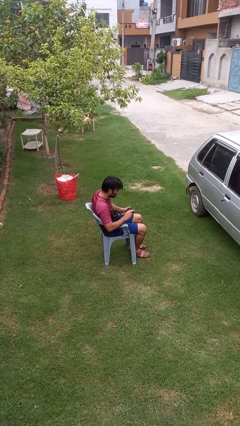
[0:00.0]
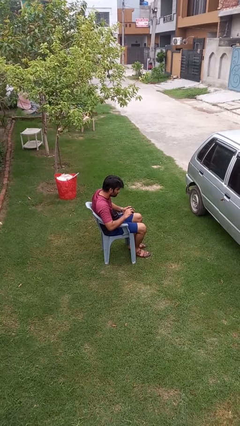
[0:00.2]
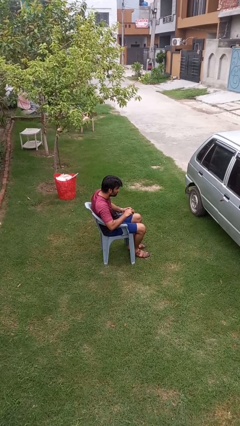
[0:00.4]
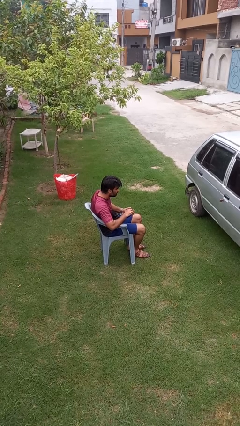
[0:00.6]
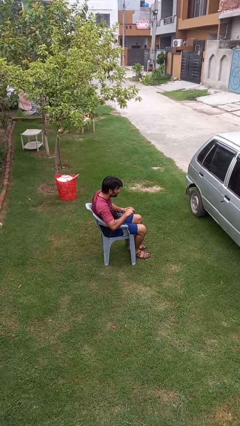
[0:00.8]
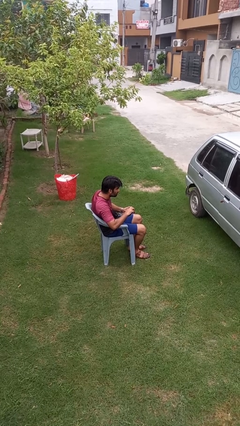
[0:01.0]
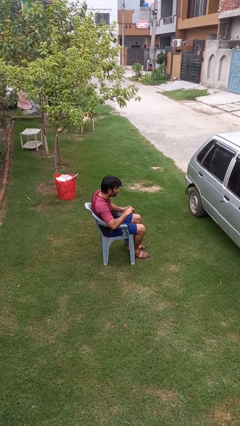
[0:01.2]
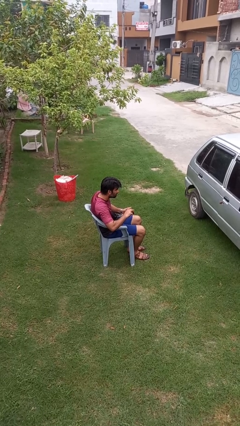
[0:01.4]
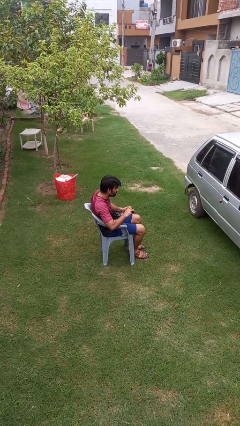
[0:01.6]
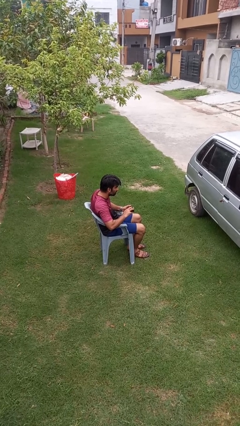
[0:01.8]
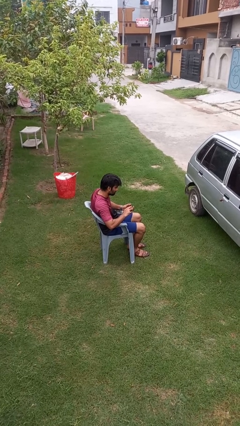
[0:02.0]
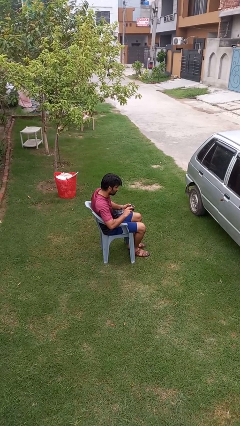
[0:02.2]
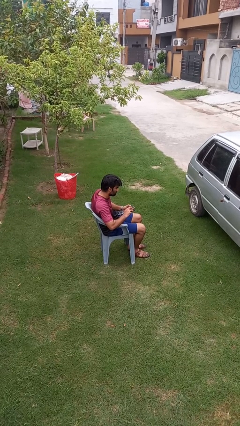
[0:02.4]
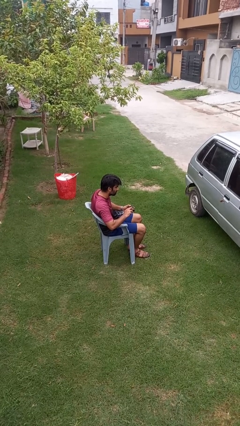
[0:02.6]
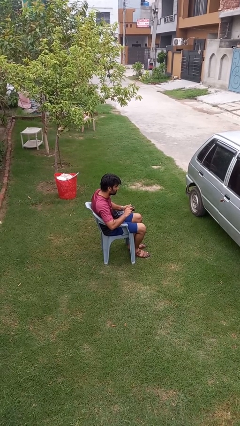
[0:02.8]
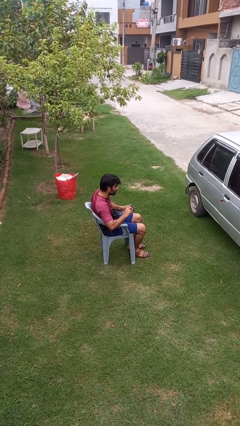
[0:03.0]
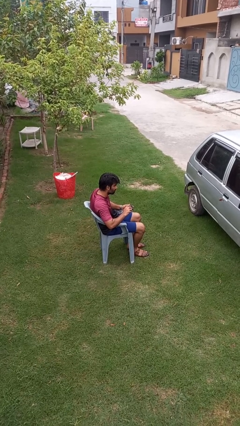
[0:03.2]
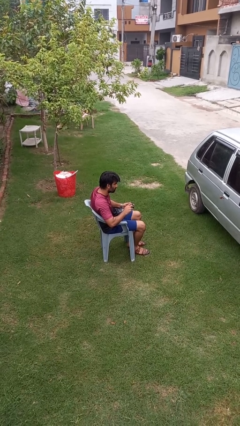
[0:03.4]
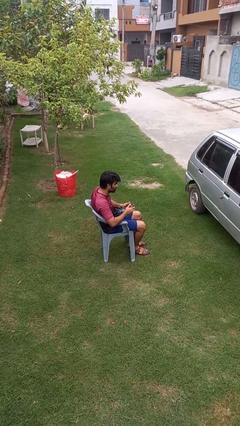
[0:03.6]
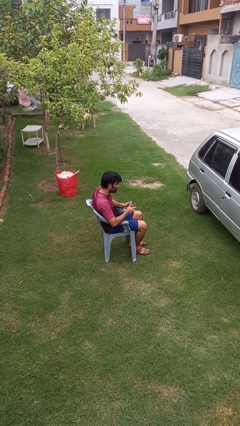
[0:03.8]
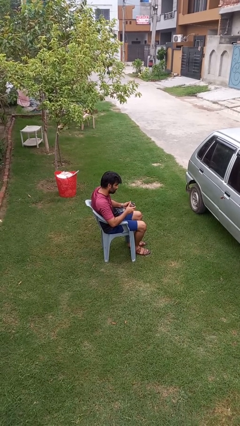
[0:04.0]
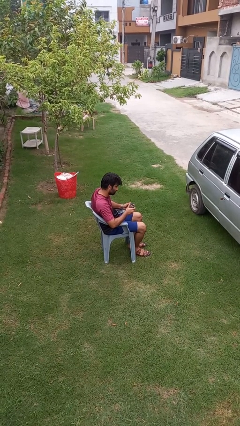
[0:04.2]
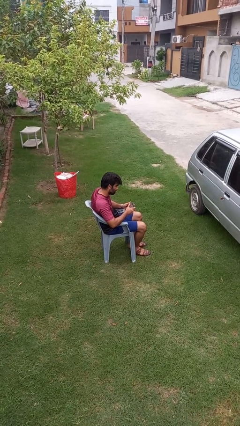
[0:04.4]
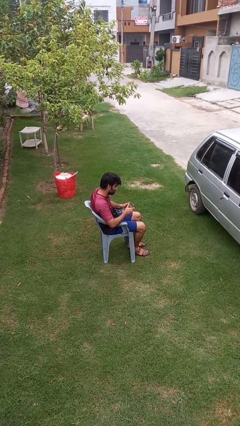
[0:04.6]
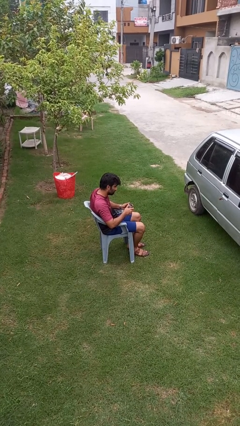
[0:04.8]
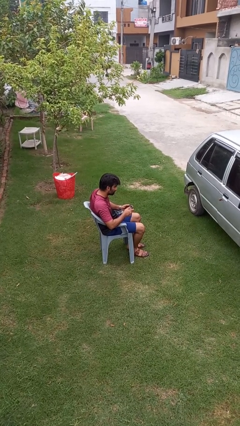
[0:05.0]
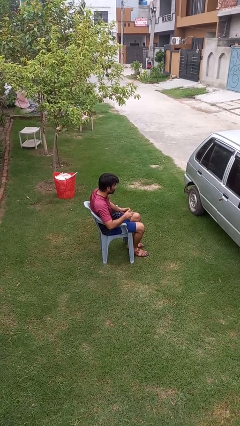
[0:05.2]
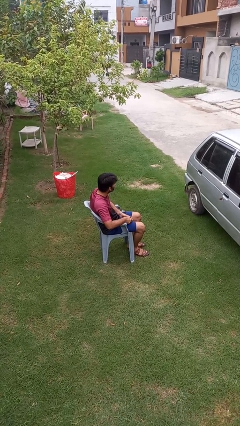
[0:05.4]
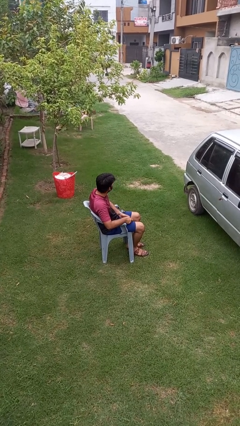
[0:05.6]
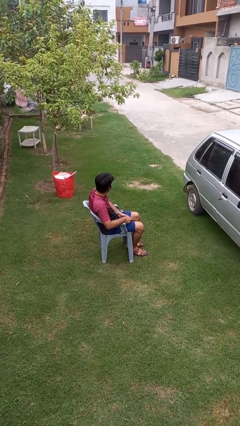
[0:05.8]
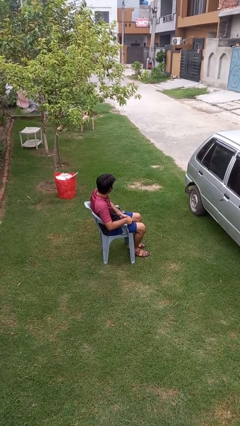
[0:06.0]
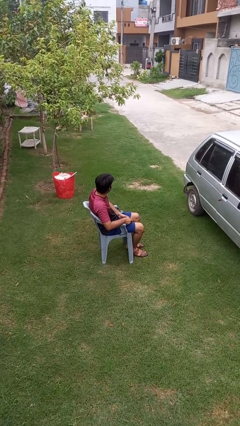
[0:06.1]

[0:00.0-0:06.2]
person interacts with handheld game

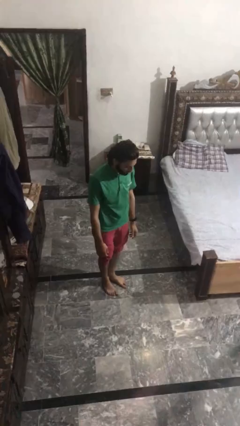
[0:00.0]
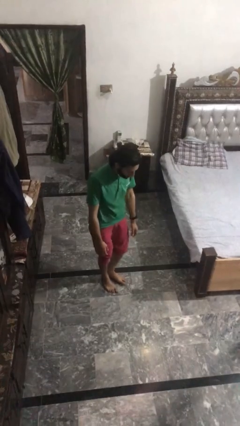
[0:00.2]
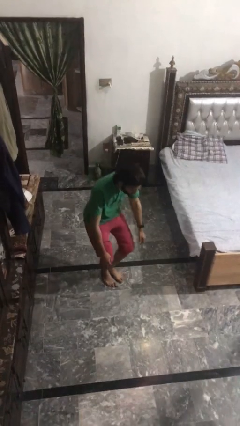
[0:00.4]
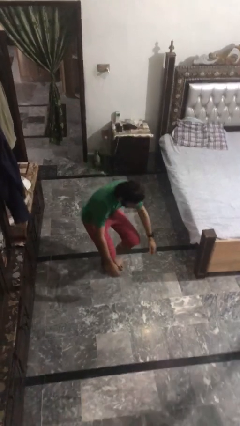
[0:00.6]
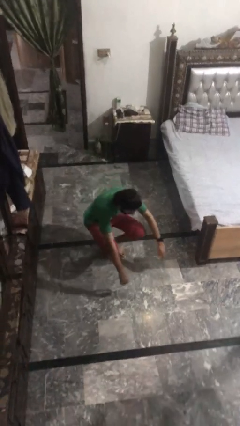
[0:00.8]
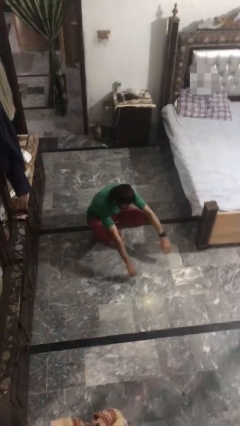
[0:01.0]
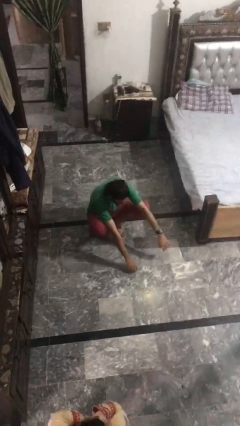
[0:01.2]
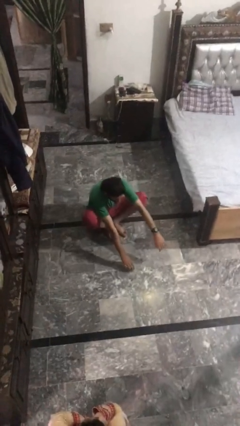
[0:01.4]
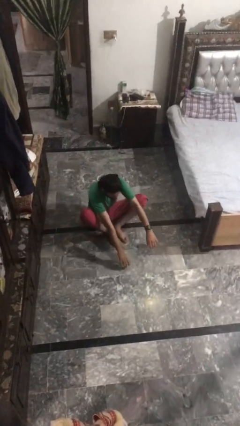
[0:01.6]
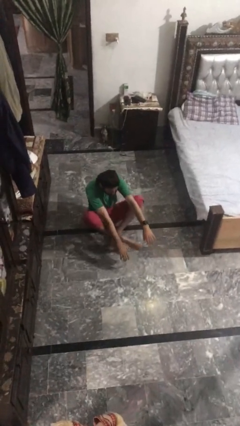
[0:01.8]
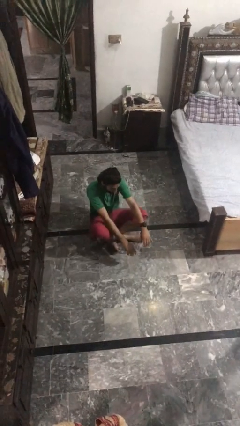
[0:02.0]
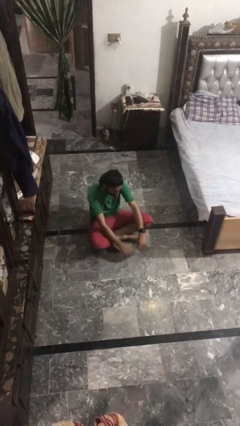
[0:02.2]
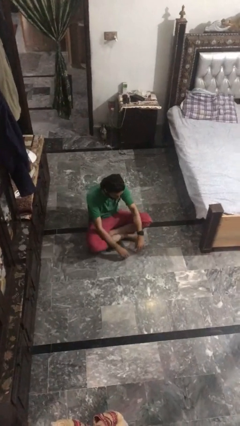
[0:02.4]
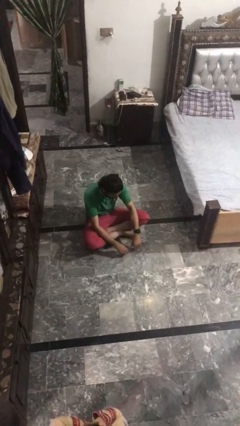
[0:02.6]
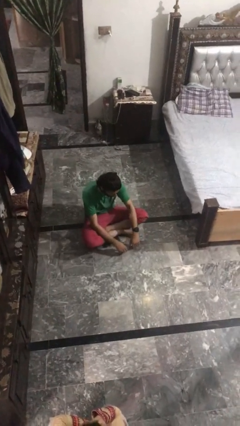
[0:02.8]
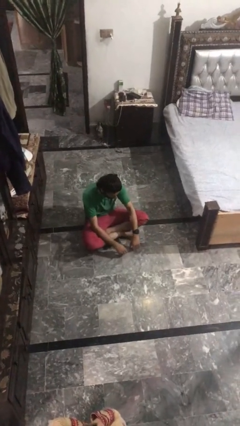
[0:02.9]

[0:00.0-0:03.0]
person sits crisscross

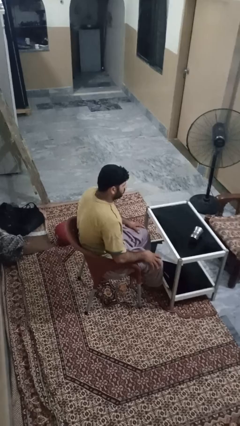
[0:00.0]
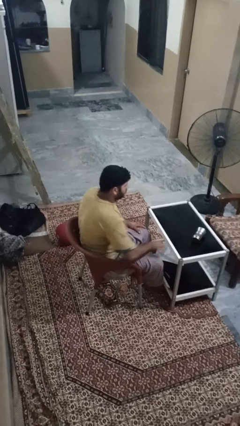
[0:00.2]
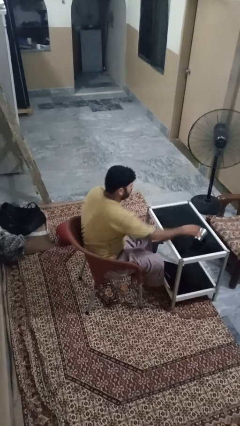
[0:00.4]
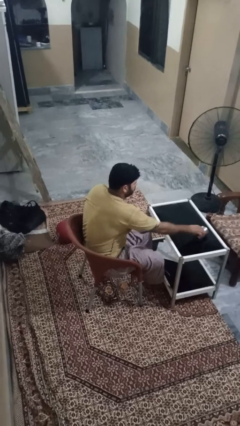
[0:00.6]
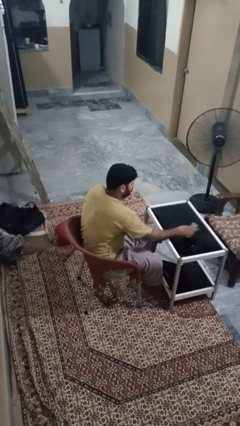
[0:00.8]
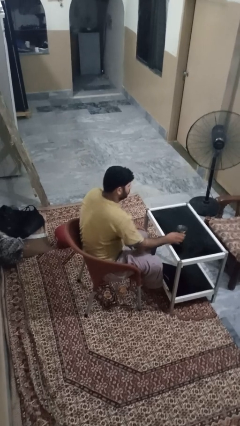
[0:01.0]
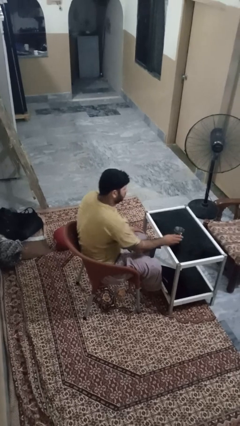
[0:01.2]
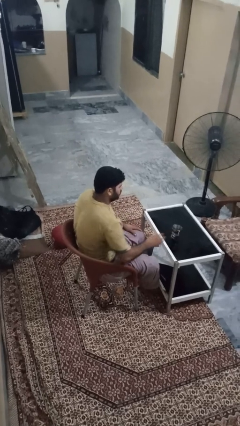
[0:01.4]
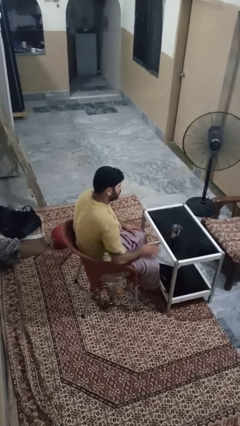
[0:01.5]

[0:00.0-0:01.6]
person sets upright glass

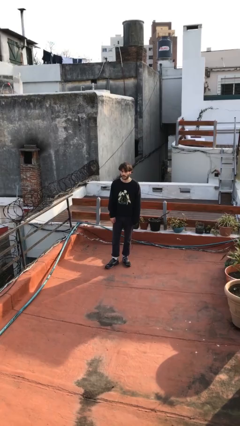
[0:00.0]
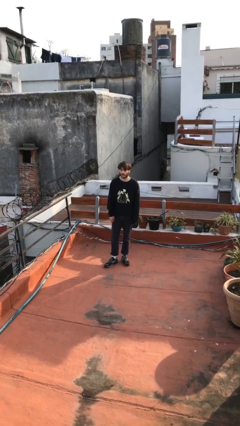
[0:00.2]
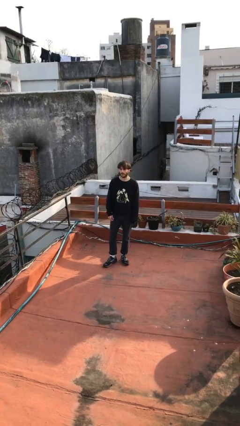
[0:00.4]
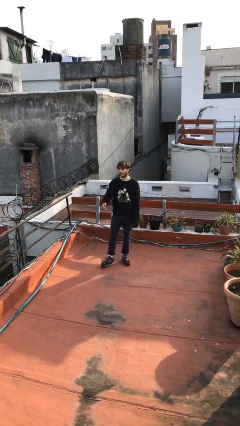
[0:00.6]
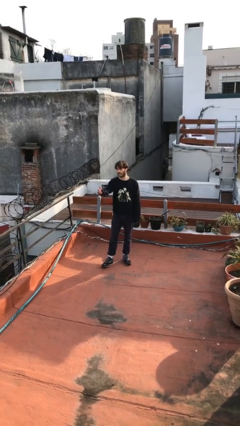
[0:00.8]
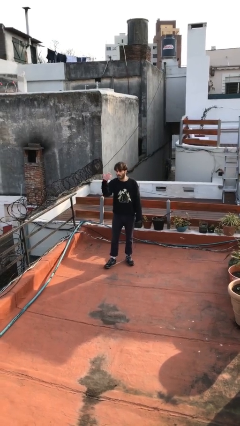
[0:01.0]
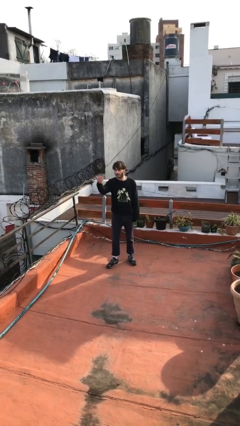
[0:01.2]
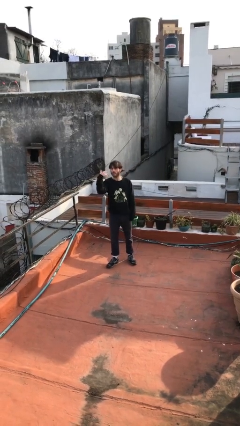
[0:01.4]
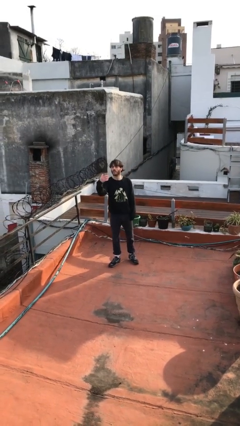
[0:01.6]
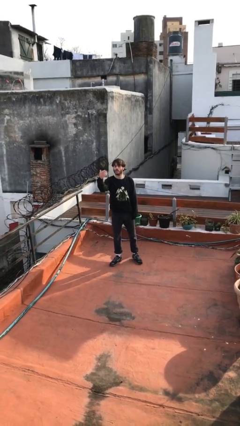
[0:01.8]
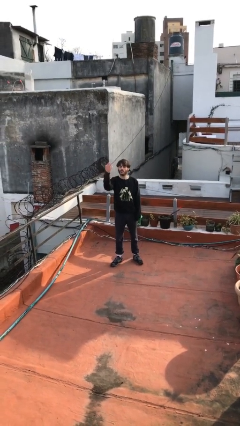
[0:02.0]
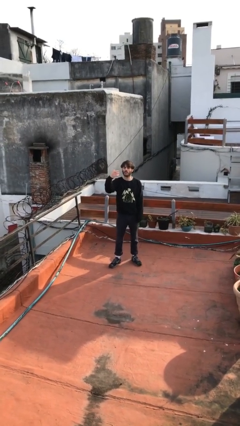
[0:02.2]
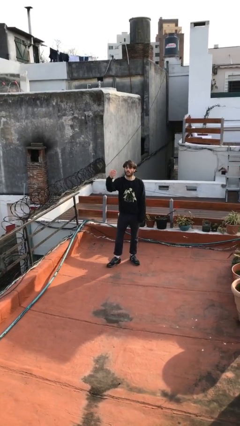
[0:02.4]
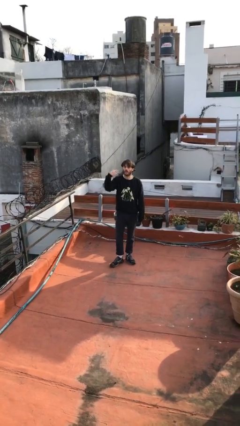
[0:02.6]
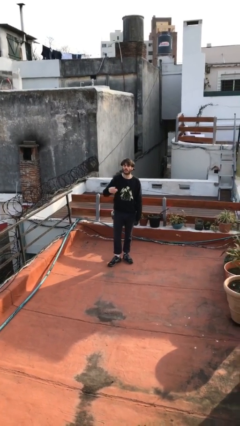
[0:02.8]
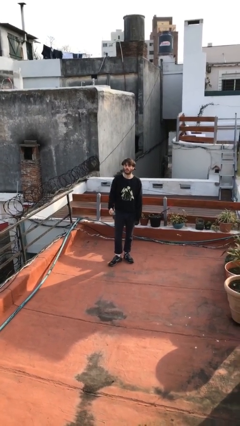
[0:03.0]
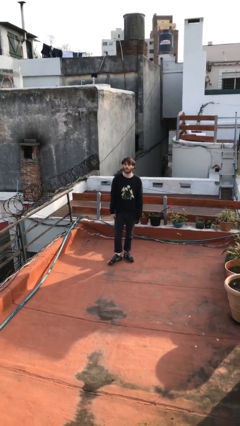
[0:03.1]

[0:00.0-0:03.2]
person gestures come here

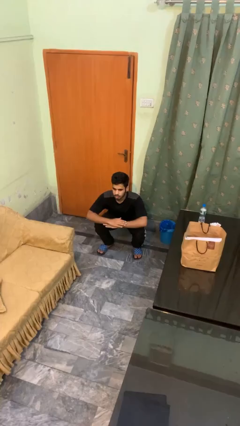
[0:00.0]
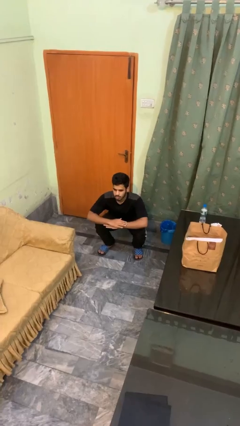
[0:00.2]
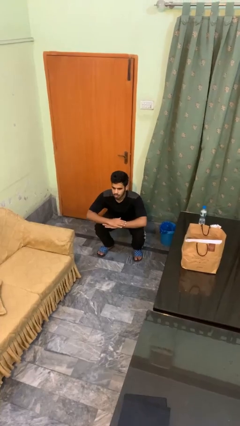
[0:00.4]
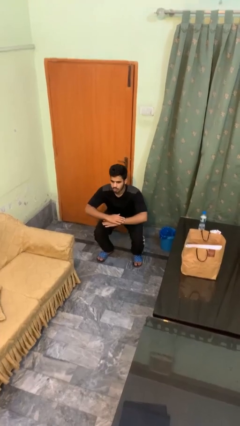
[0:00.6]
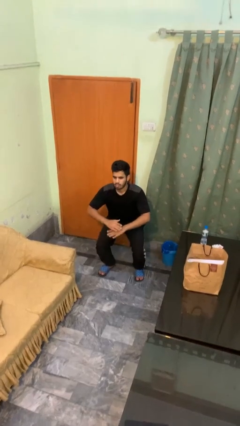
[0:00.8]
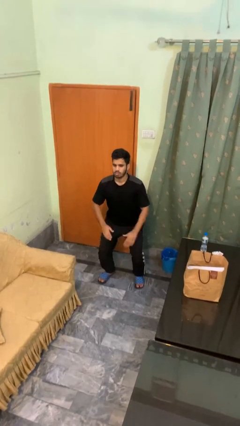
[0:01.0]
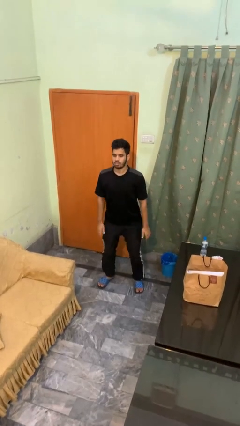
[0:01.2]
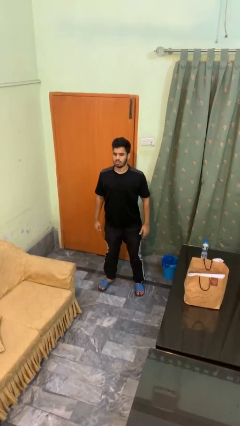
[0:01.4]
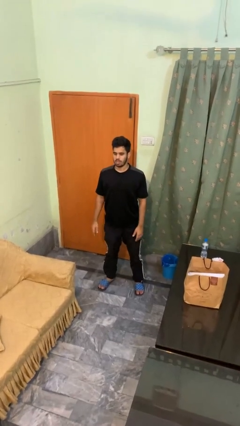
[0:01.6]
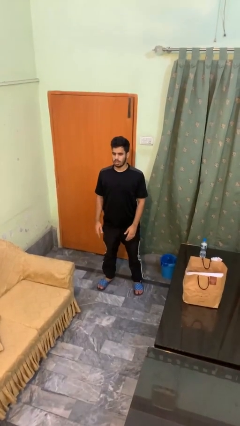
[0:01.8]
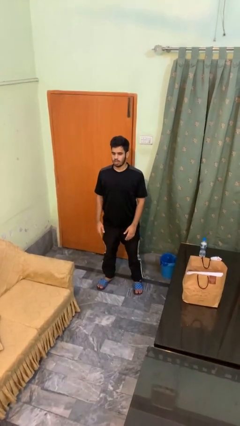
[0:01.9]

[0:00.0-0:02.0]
person stands up

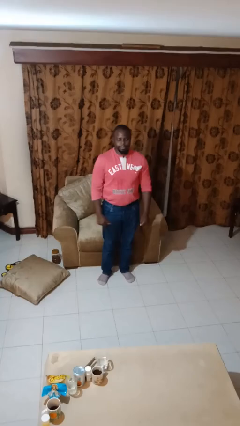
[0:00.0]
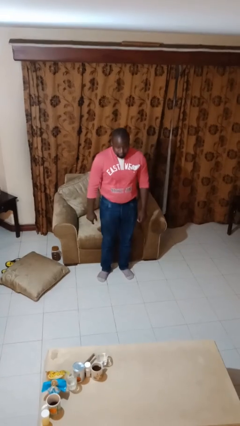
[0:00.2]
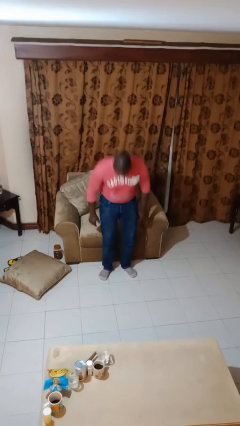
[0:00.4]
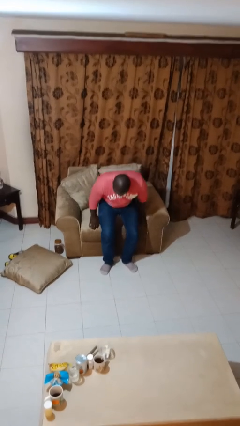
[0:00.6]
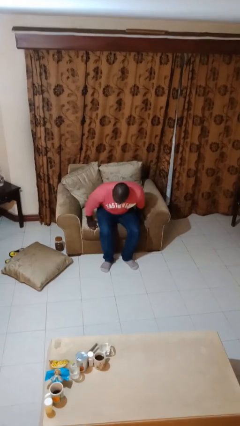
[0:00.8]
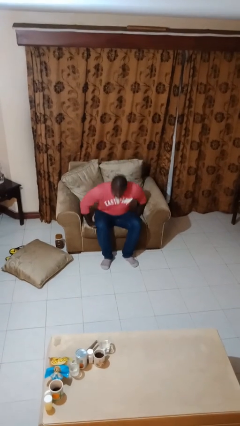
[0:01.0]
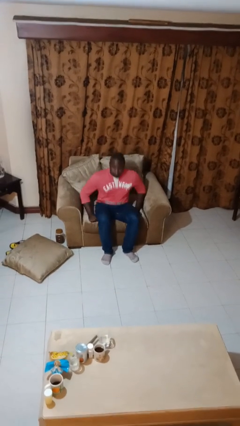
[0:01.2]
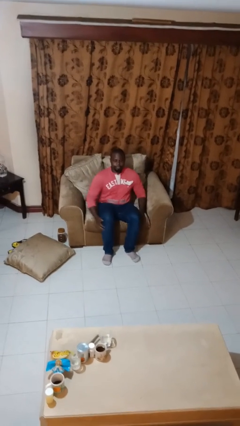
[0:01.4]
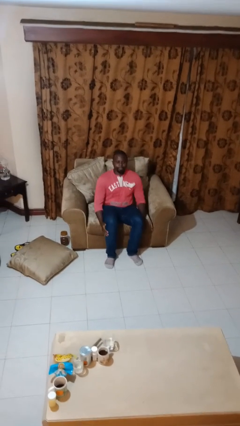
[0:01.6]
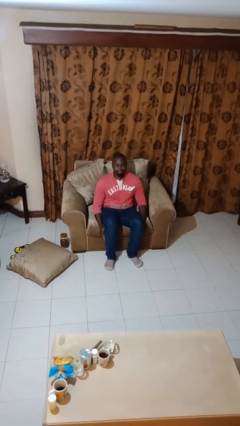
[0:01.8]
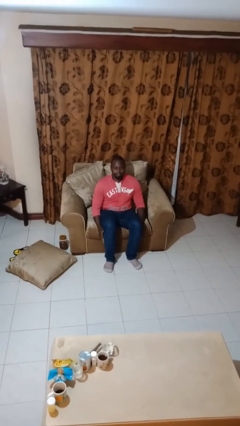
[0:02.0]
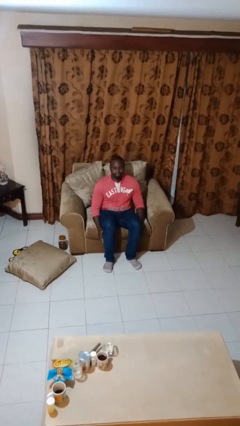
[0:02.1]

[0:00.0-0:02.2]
person sits down
